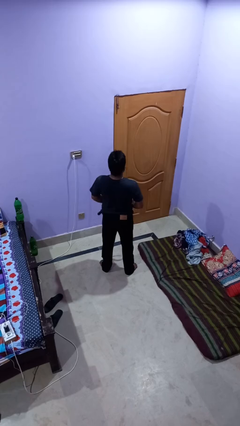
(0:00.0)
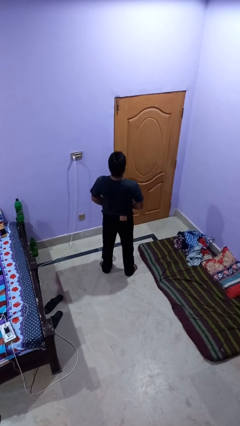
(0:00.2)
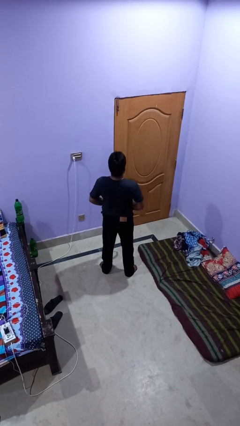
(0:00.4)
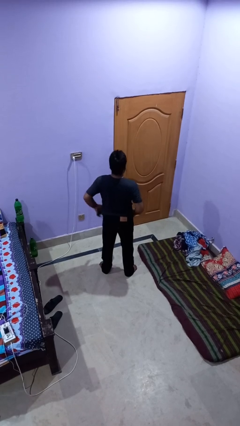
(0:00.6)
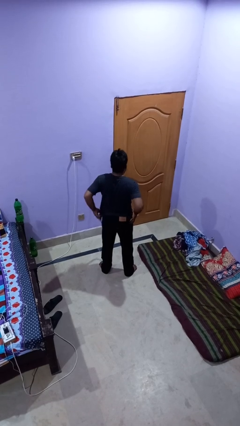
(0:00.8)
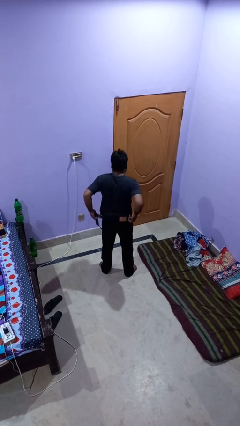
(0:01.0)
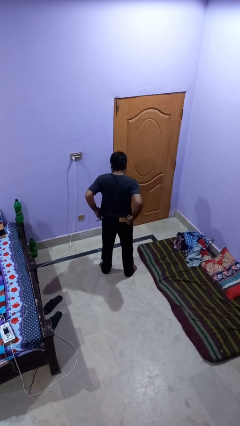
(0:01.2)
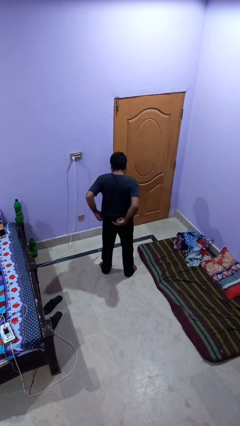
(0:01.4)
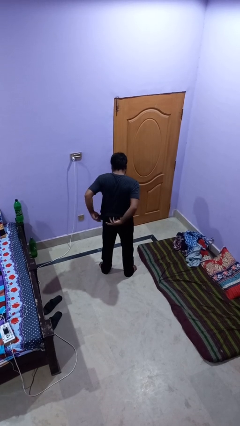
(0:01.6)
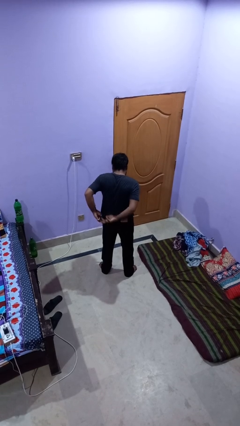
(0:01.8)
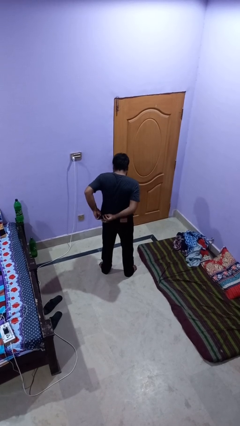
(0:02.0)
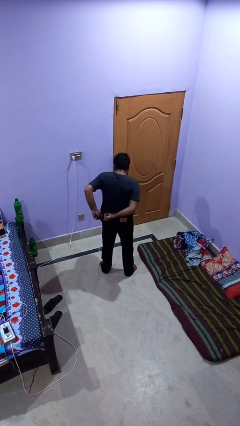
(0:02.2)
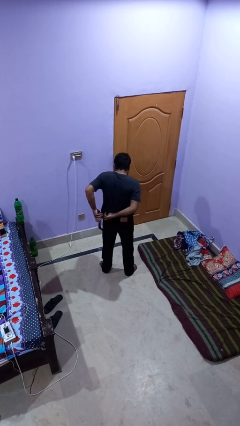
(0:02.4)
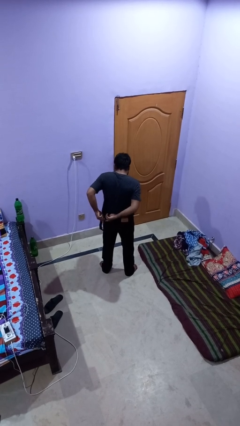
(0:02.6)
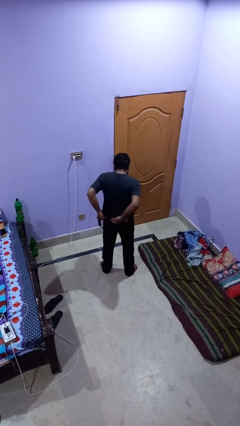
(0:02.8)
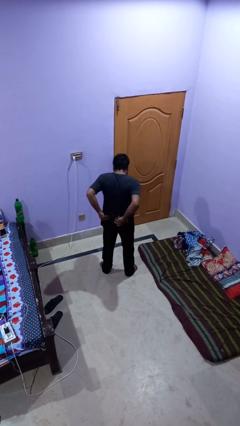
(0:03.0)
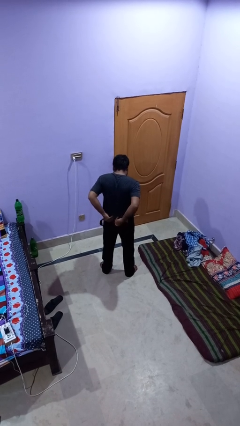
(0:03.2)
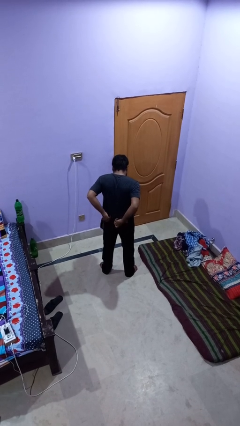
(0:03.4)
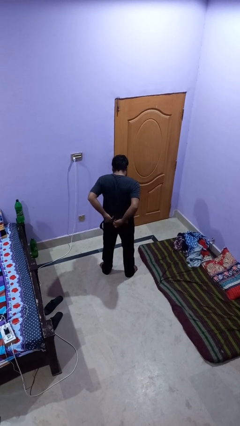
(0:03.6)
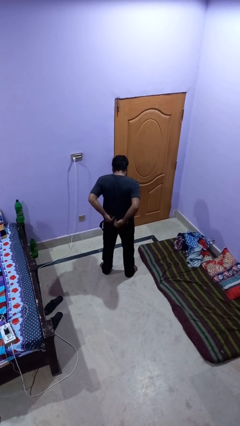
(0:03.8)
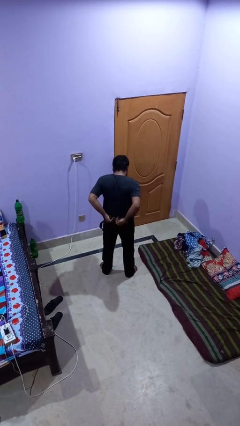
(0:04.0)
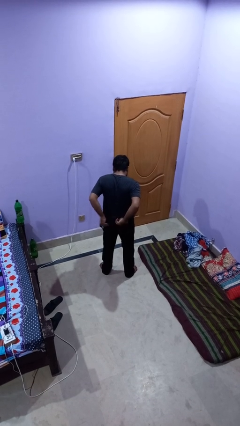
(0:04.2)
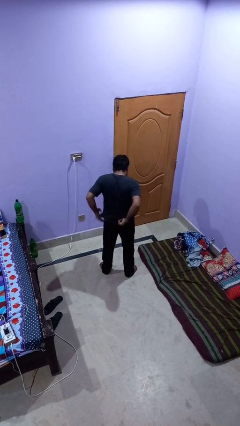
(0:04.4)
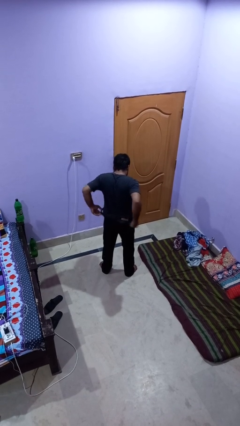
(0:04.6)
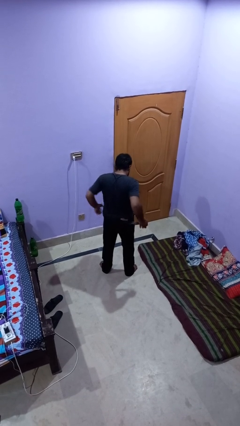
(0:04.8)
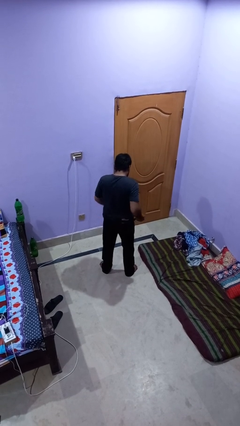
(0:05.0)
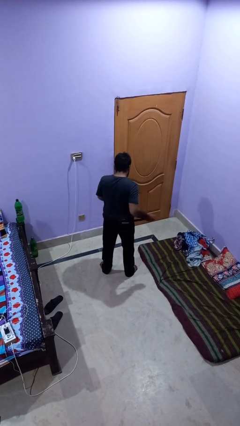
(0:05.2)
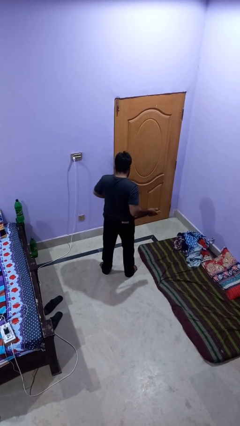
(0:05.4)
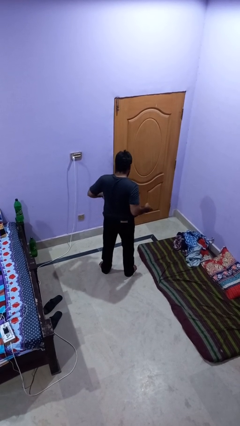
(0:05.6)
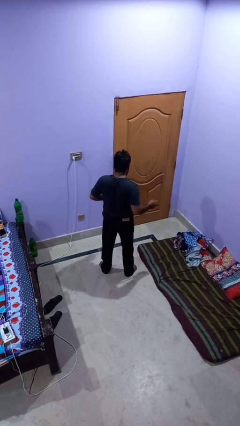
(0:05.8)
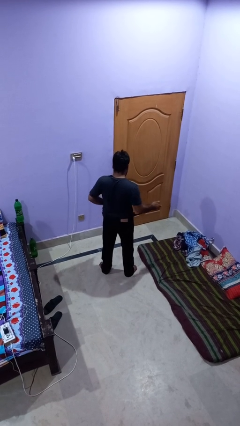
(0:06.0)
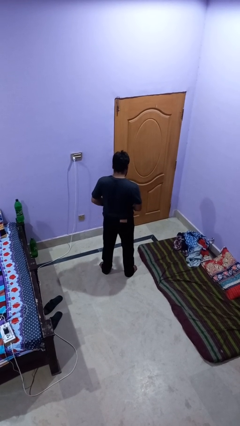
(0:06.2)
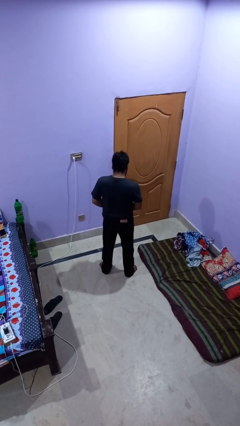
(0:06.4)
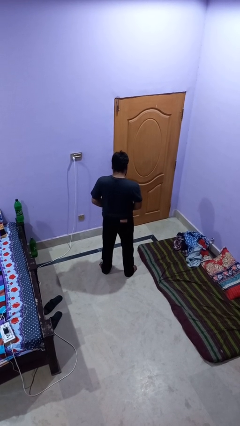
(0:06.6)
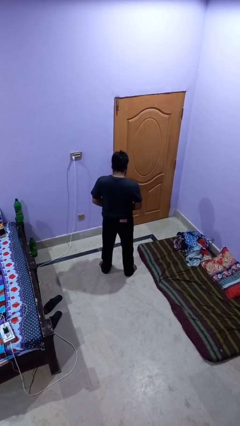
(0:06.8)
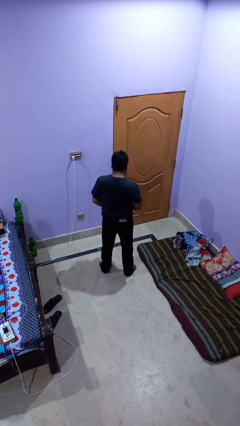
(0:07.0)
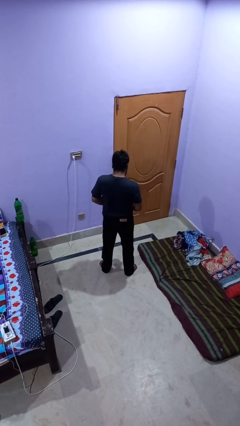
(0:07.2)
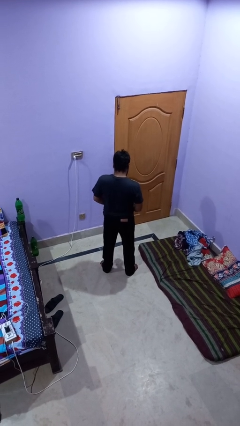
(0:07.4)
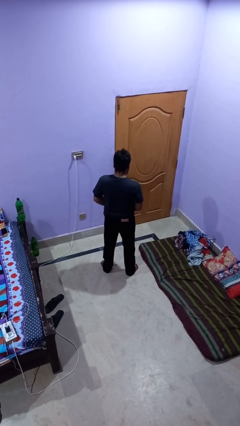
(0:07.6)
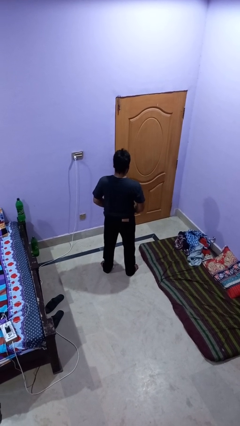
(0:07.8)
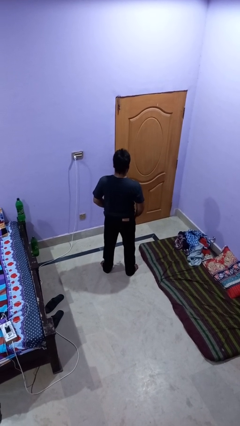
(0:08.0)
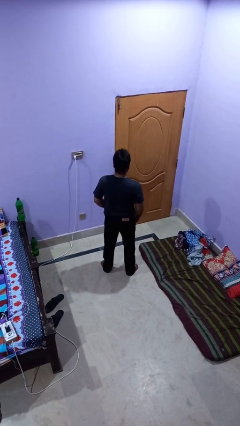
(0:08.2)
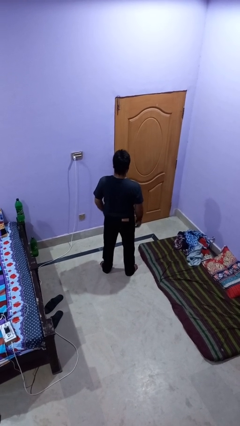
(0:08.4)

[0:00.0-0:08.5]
person puts on belt

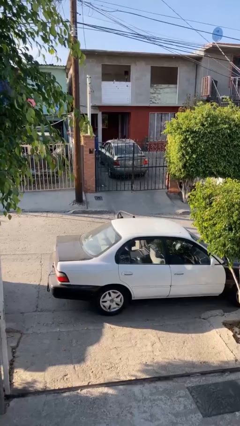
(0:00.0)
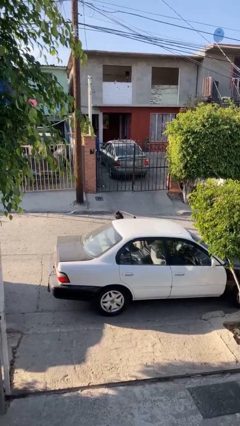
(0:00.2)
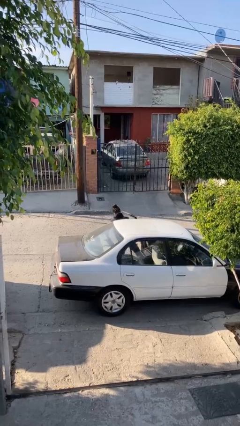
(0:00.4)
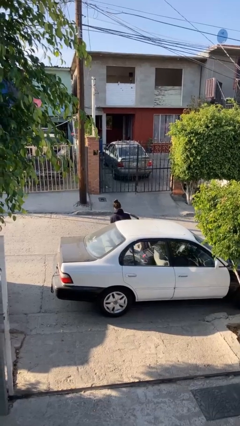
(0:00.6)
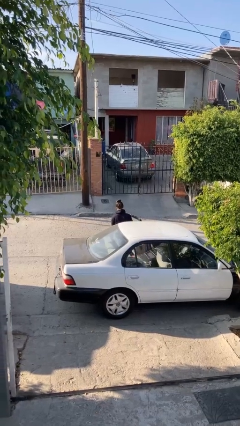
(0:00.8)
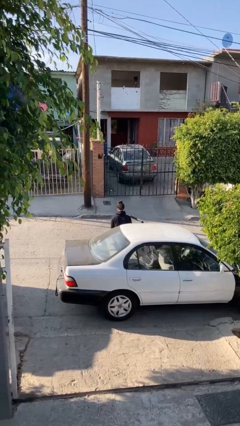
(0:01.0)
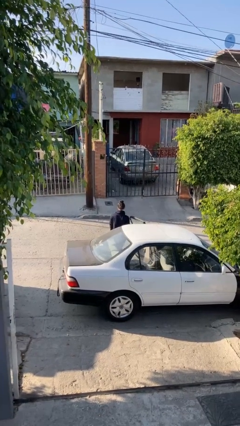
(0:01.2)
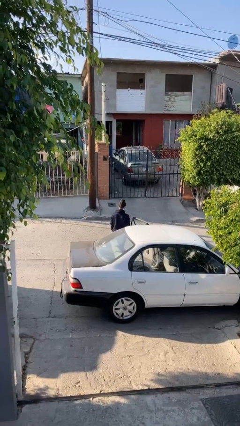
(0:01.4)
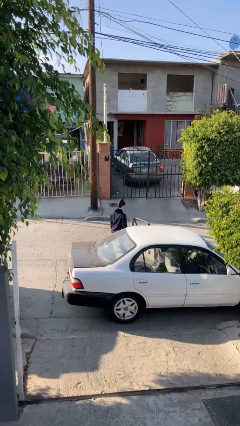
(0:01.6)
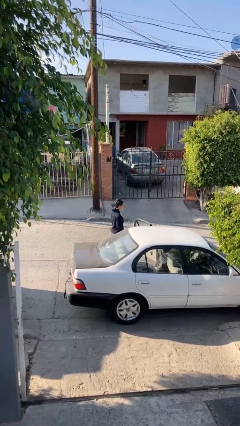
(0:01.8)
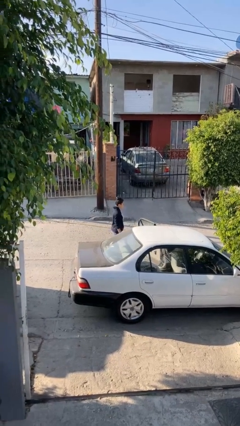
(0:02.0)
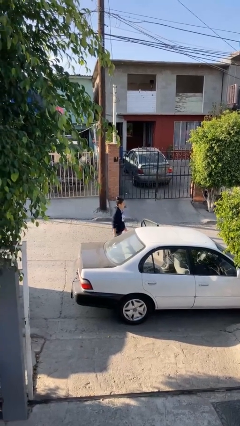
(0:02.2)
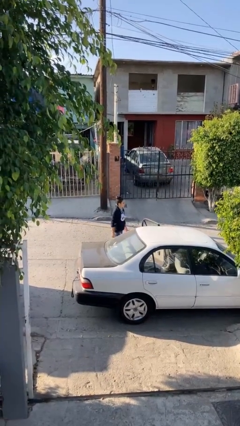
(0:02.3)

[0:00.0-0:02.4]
person exits car

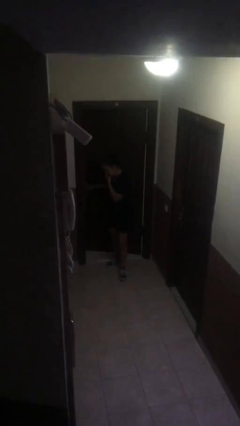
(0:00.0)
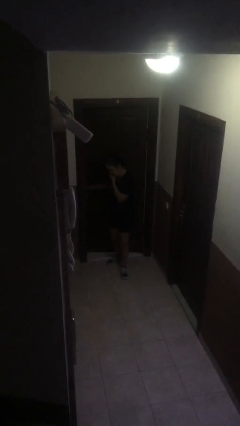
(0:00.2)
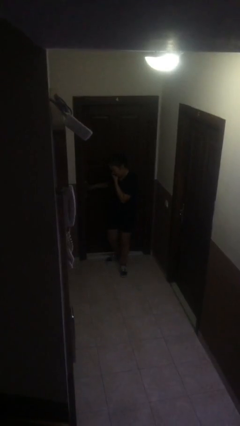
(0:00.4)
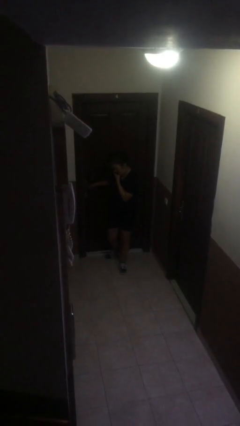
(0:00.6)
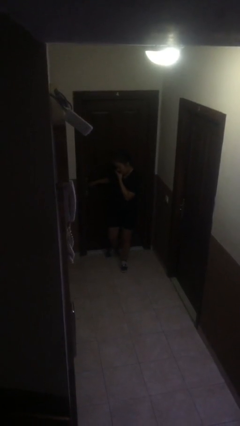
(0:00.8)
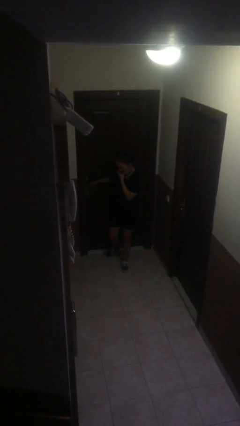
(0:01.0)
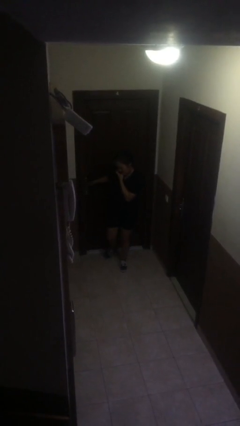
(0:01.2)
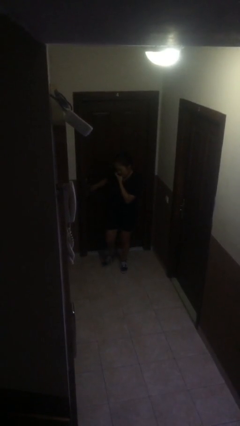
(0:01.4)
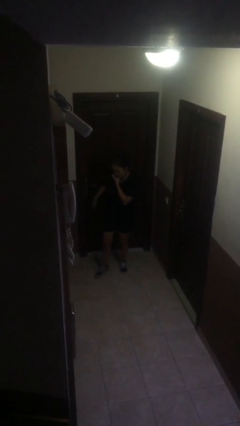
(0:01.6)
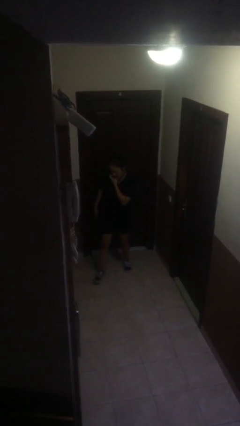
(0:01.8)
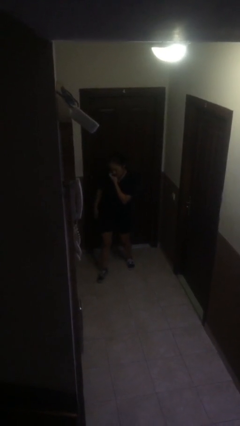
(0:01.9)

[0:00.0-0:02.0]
person closes facility door

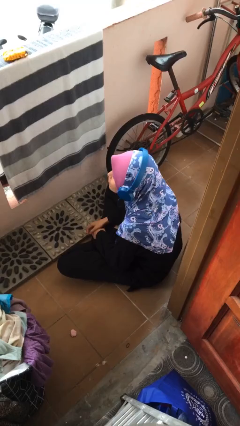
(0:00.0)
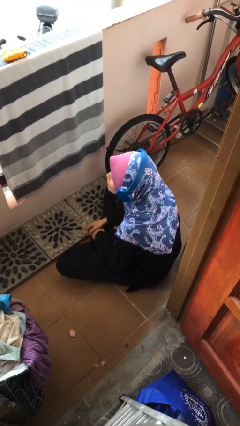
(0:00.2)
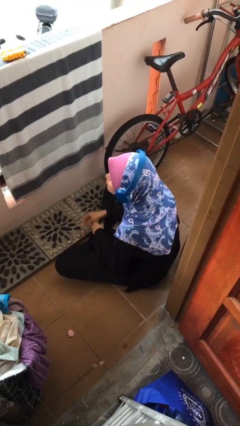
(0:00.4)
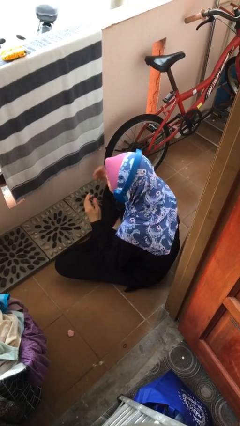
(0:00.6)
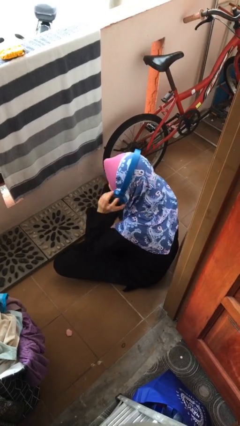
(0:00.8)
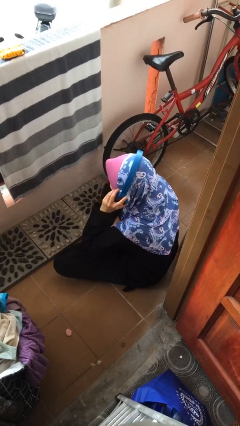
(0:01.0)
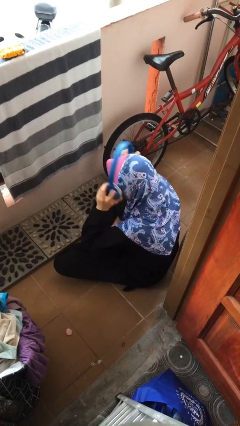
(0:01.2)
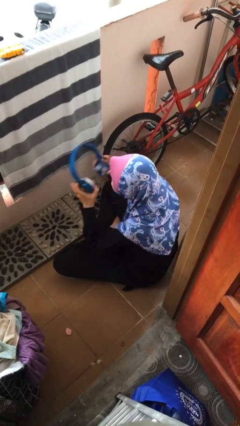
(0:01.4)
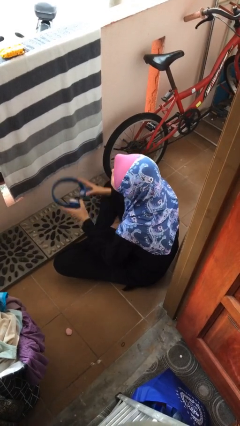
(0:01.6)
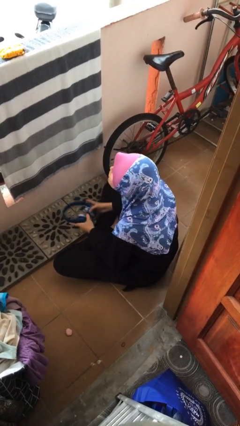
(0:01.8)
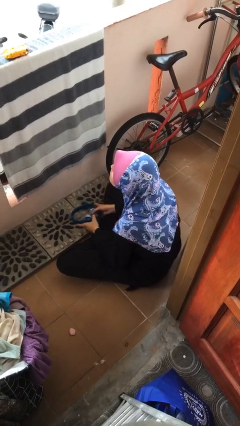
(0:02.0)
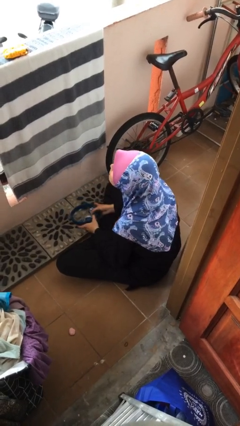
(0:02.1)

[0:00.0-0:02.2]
person takes off headphones

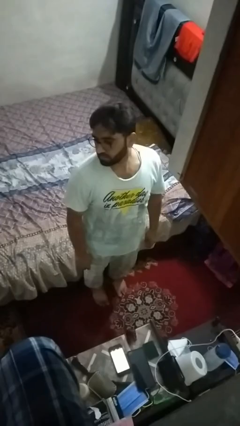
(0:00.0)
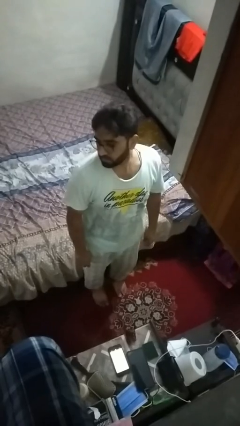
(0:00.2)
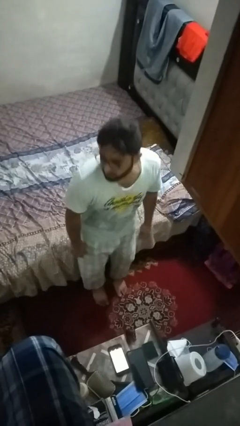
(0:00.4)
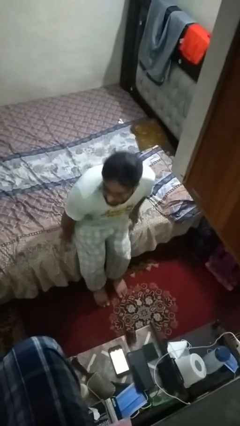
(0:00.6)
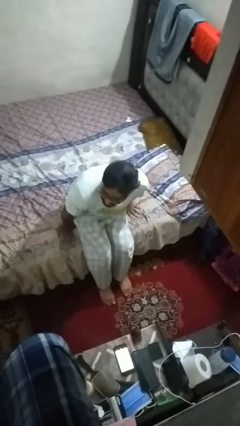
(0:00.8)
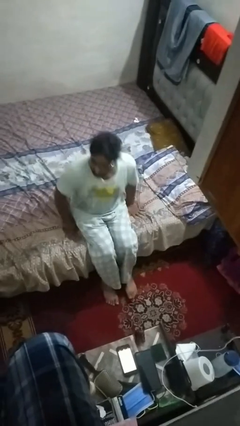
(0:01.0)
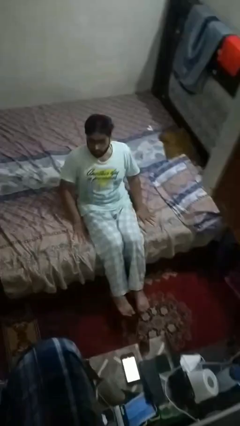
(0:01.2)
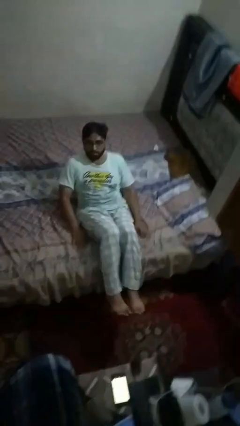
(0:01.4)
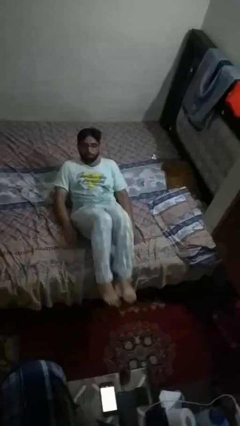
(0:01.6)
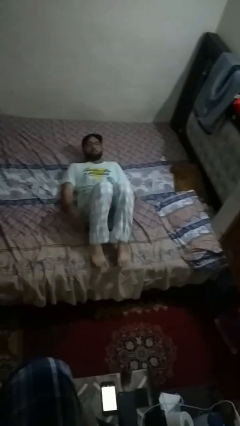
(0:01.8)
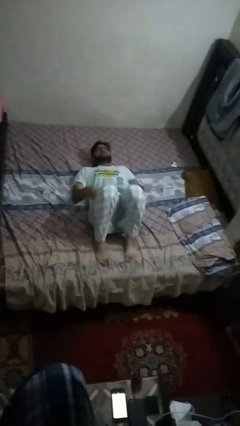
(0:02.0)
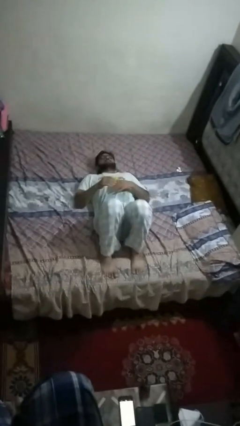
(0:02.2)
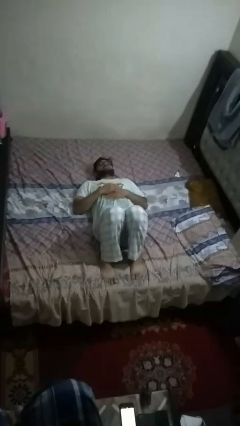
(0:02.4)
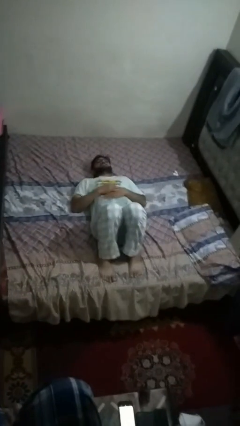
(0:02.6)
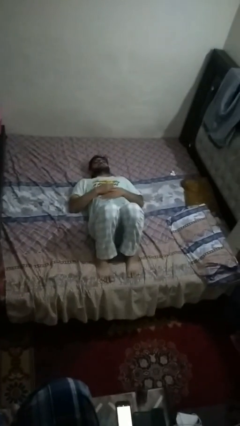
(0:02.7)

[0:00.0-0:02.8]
person lies down on bed
